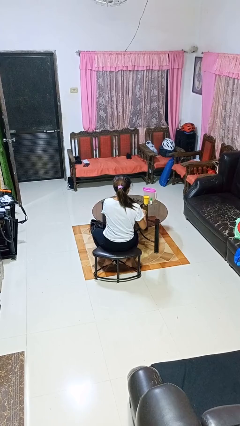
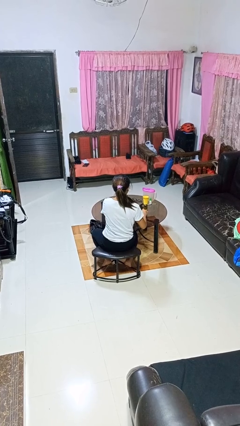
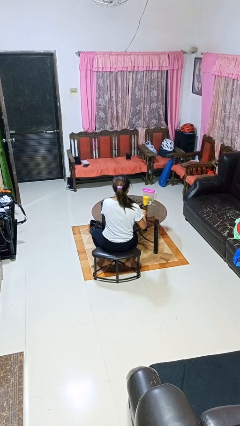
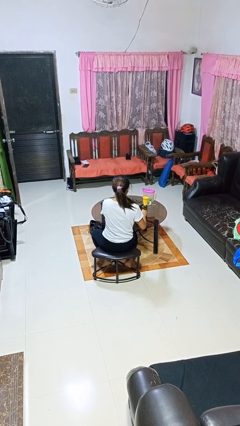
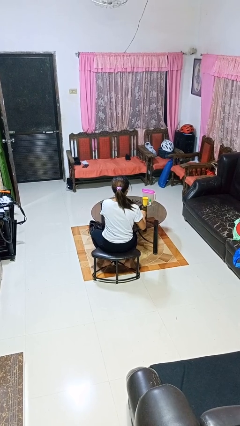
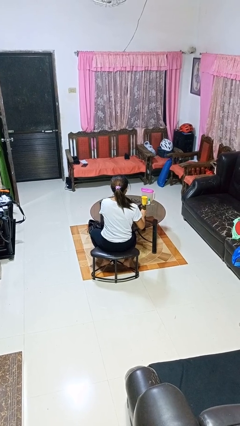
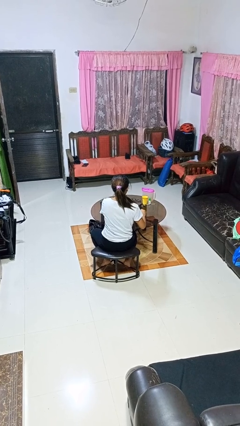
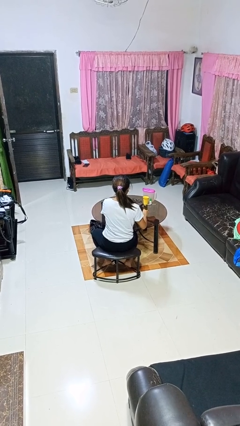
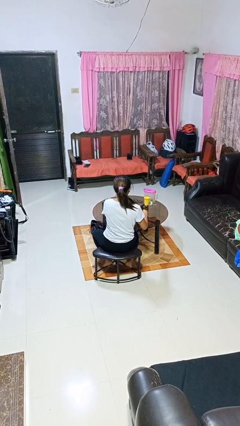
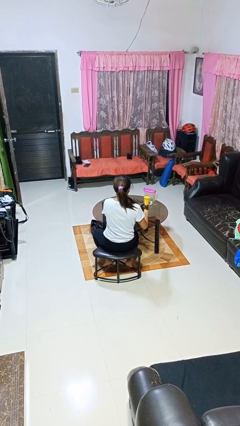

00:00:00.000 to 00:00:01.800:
person stirs mug

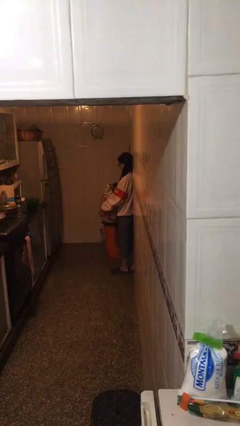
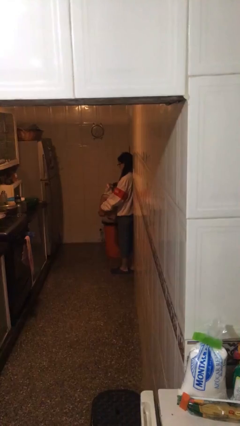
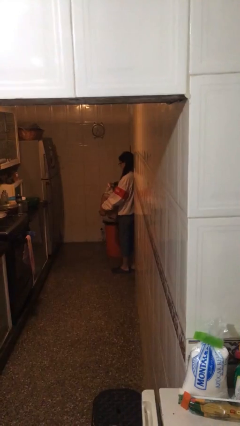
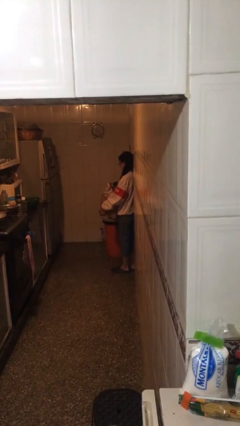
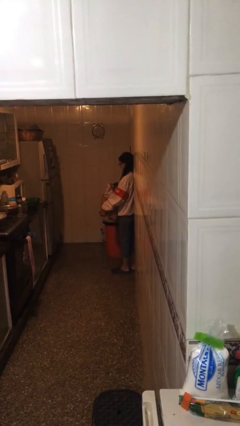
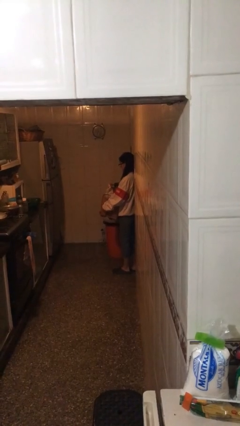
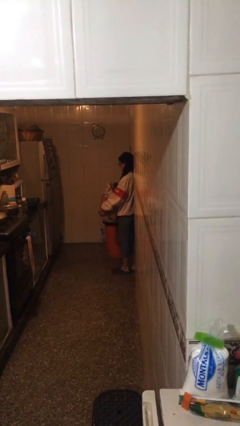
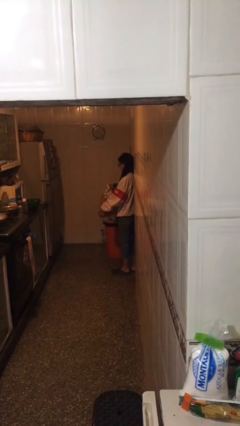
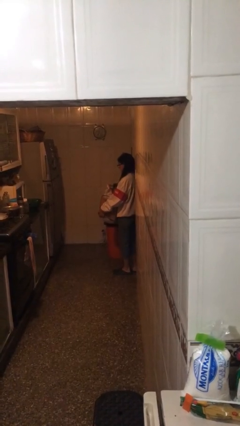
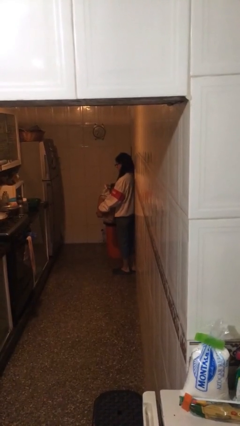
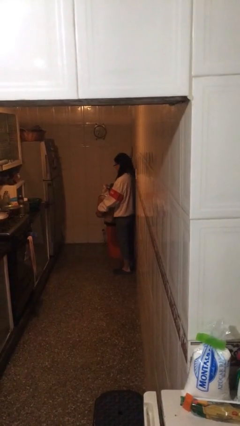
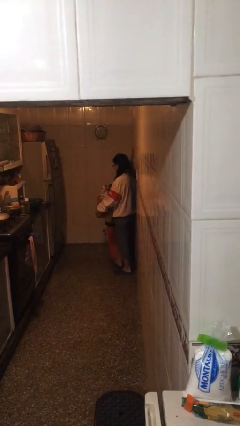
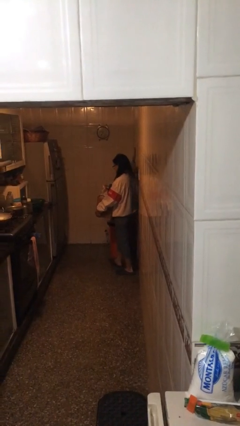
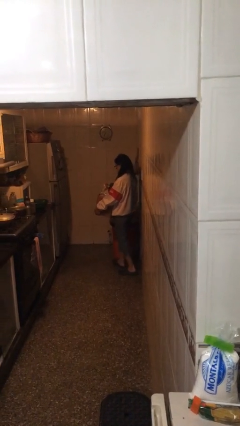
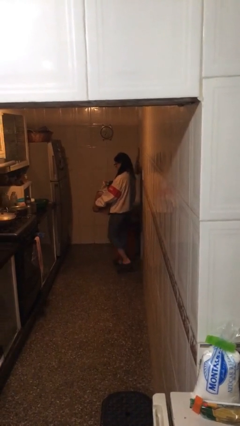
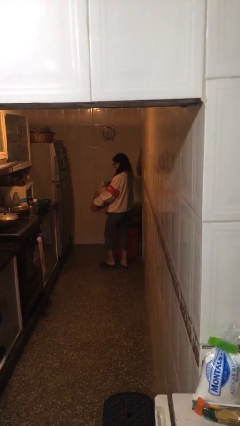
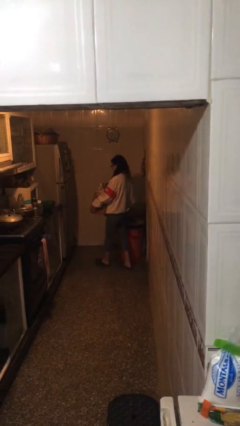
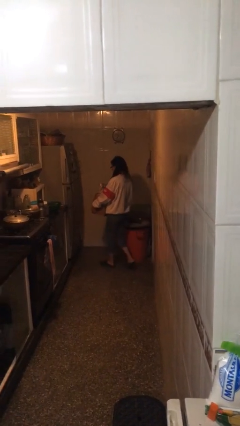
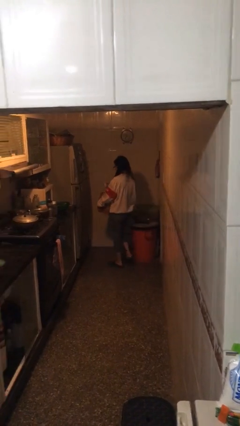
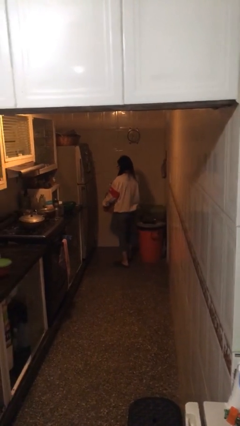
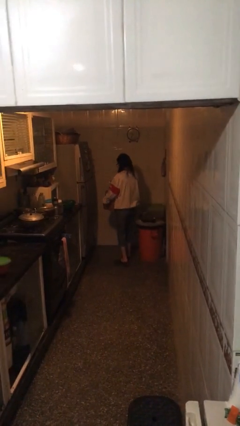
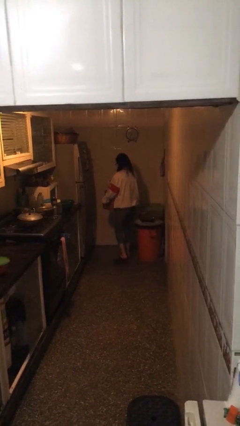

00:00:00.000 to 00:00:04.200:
person carries heavy object

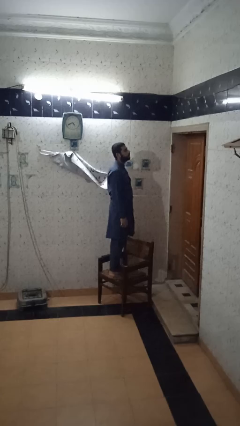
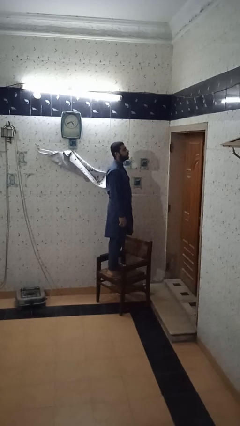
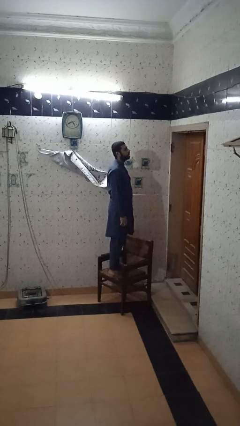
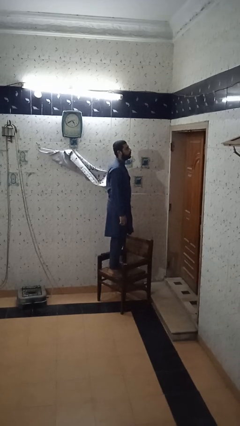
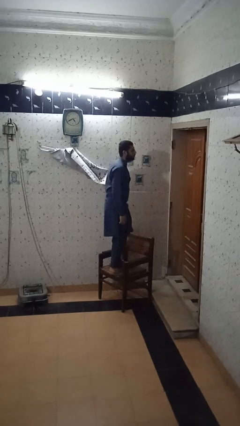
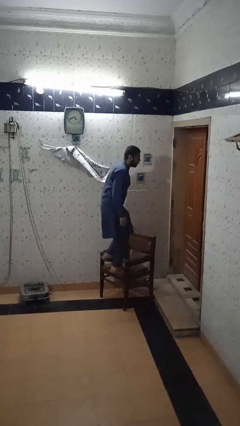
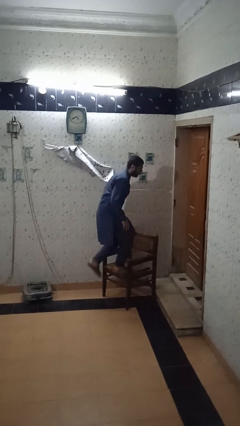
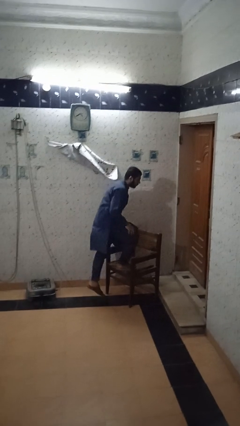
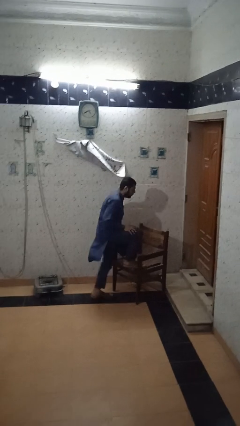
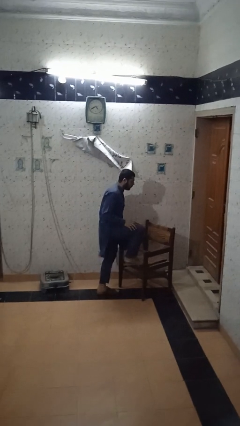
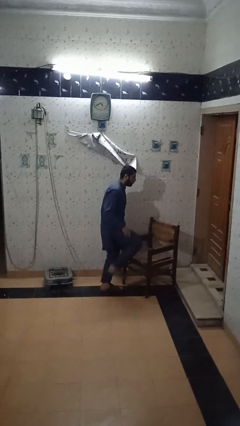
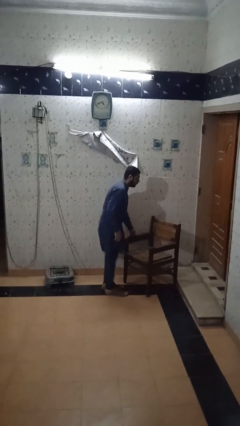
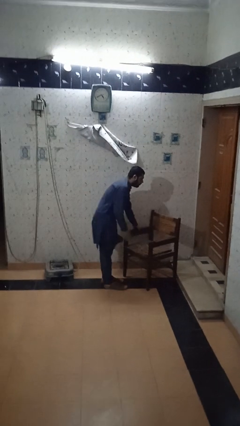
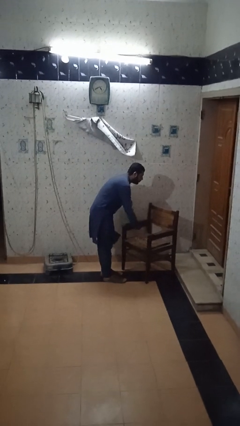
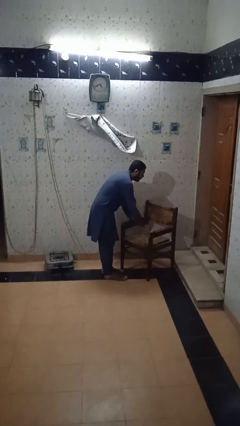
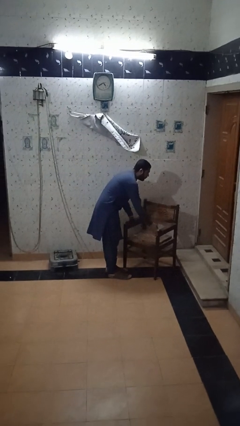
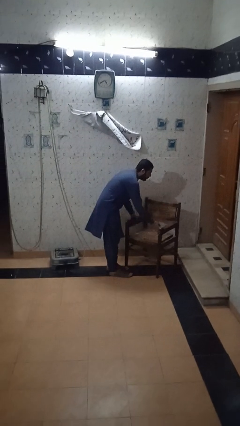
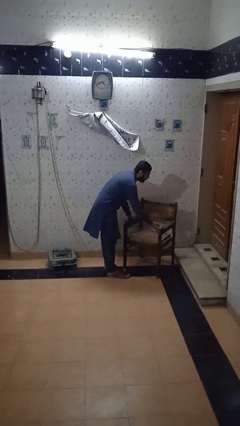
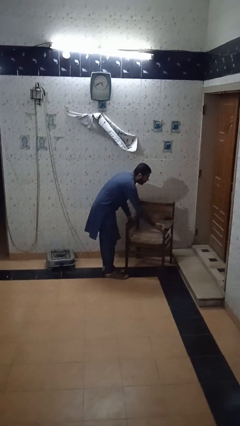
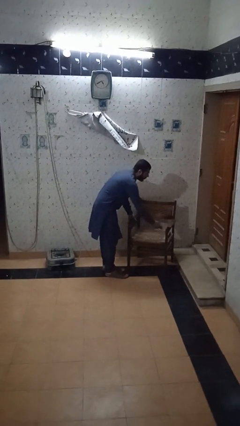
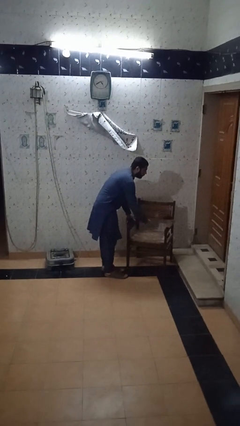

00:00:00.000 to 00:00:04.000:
person climbs off chair

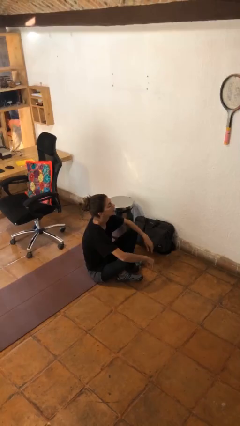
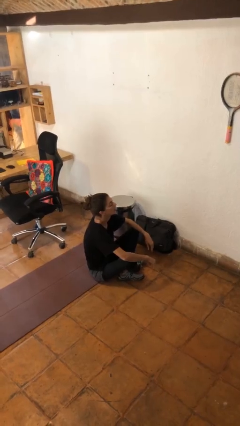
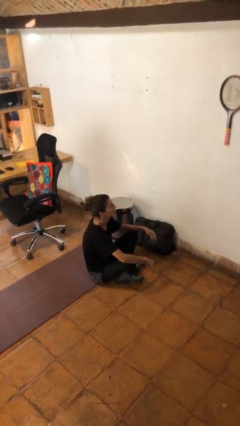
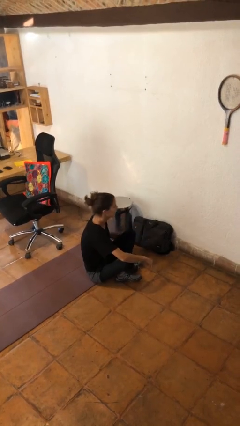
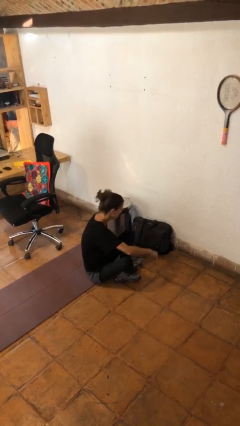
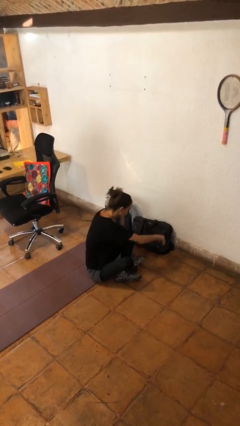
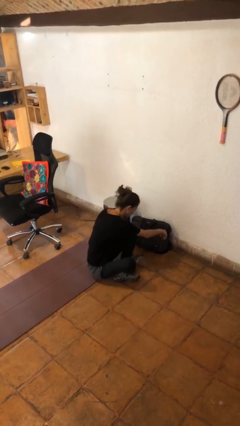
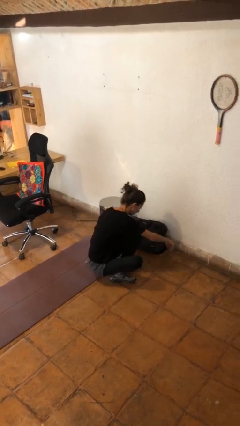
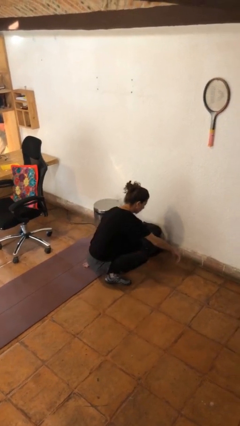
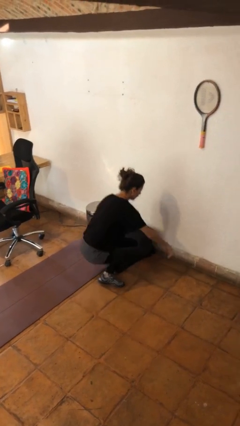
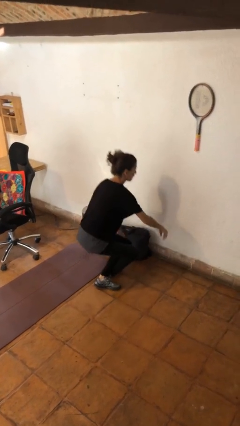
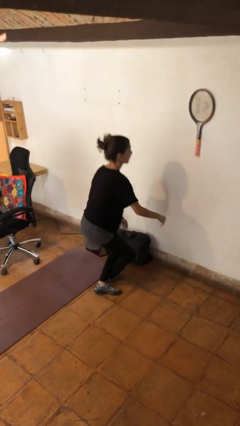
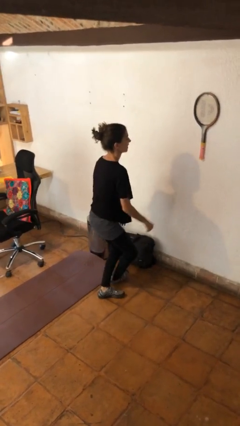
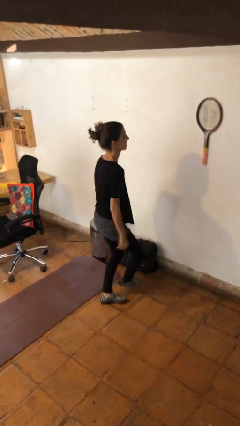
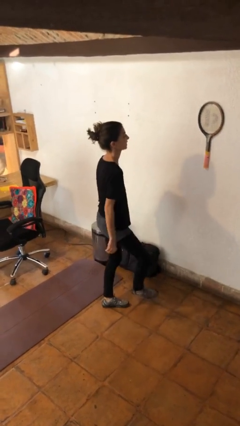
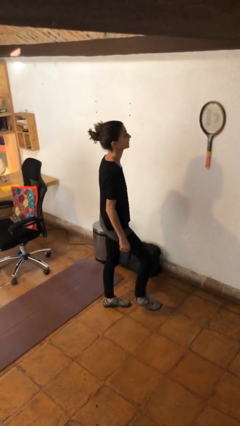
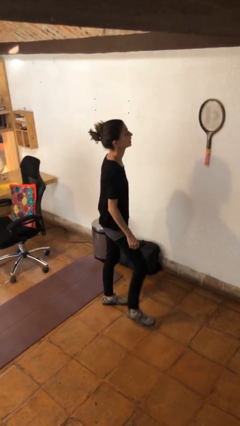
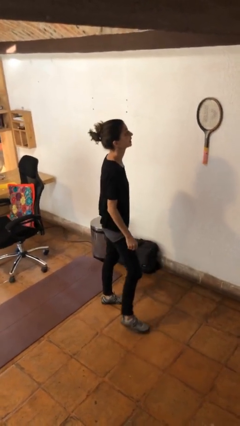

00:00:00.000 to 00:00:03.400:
person stands up from floor

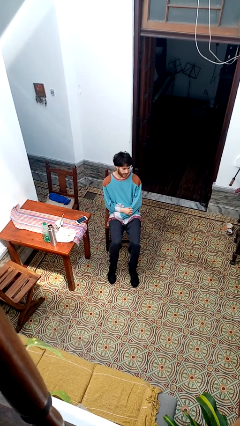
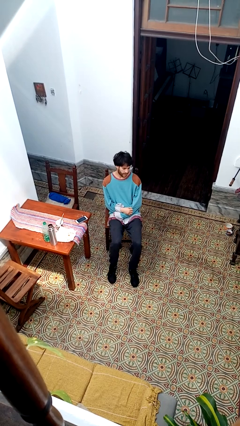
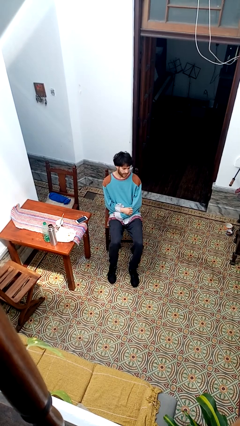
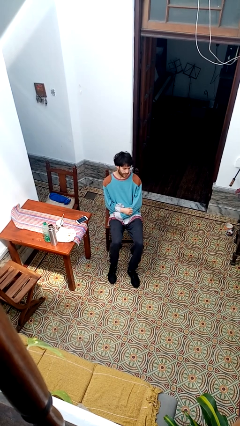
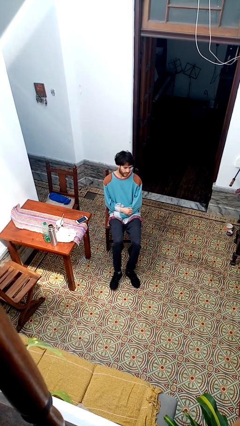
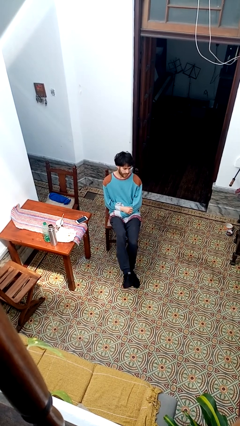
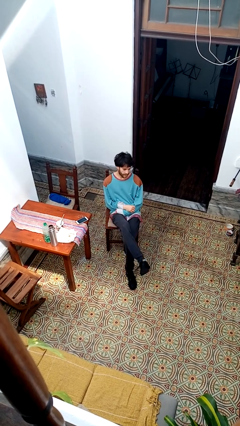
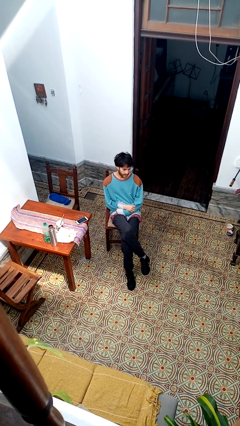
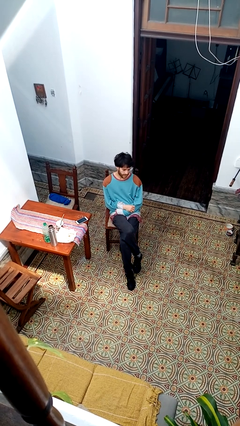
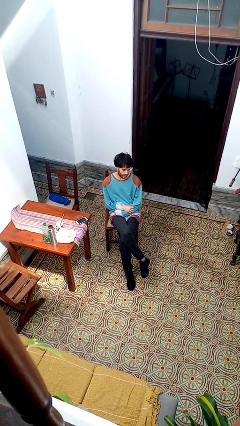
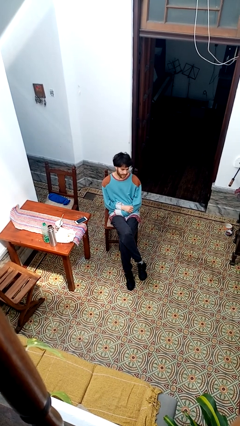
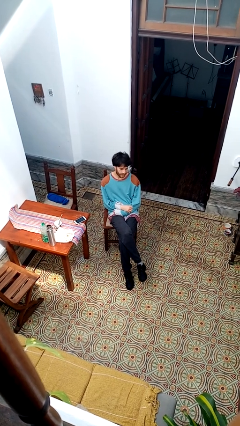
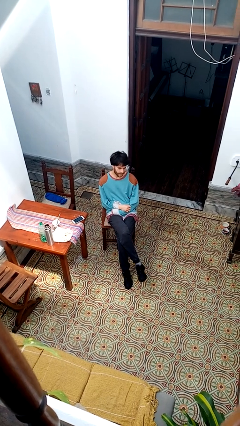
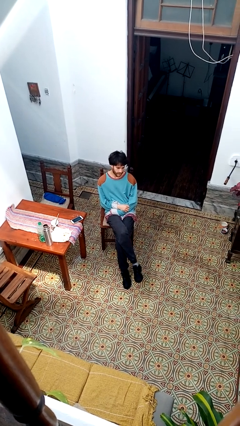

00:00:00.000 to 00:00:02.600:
person crosses legs

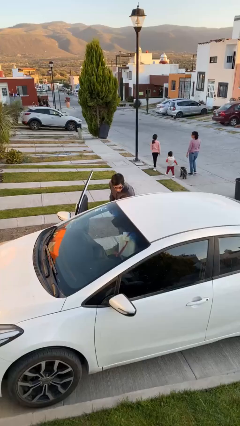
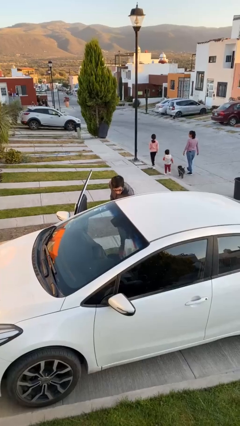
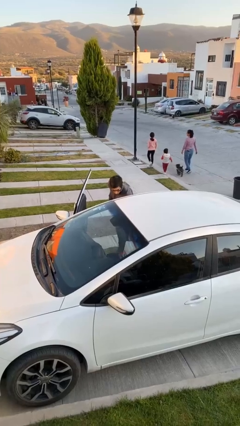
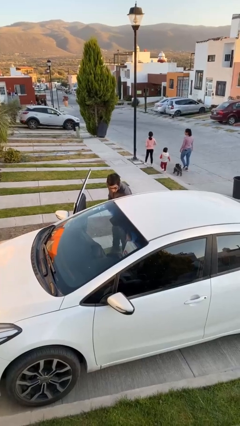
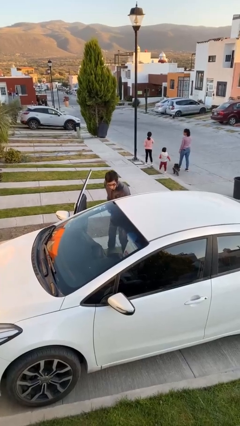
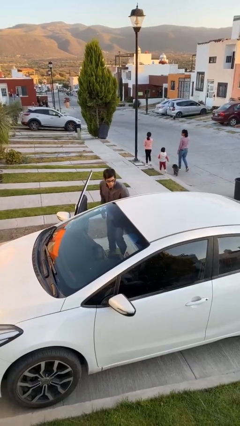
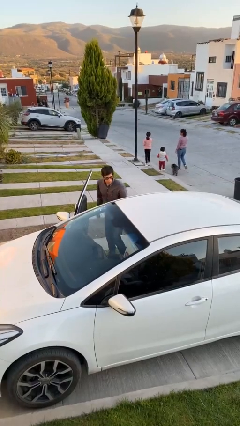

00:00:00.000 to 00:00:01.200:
person loads car
